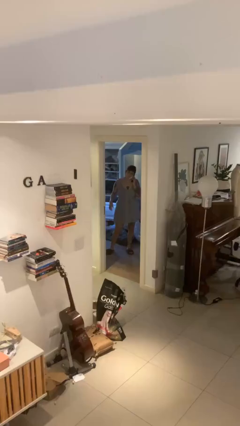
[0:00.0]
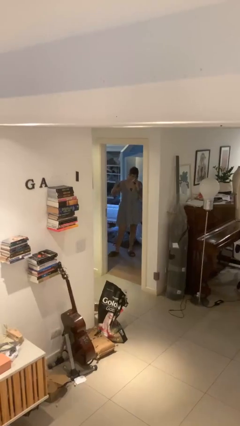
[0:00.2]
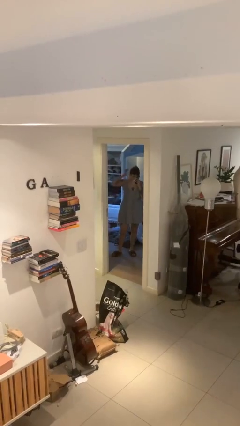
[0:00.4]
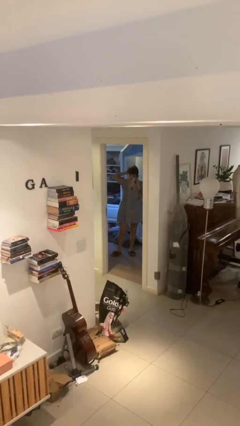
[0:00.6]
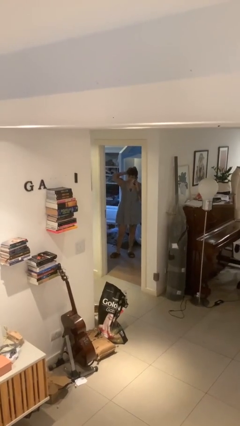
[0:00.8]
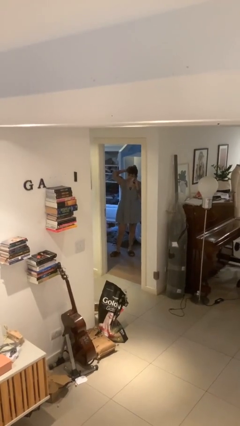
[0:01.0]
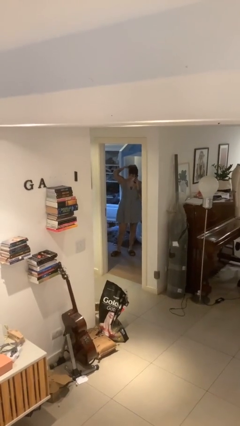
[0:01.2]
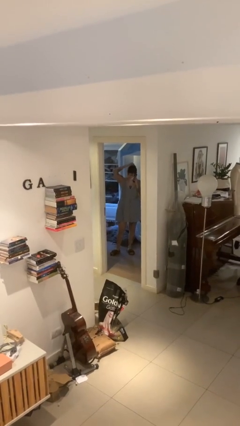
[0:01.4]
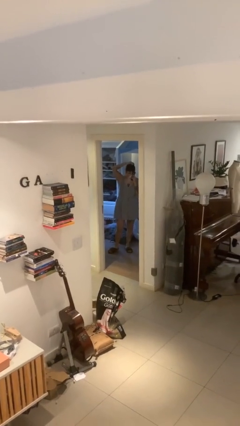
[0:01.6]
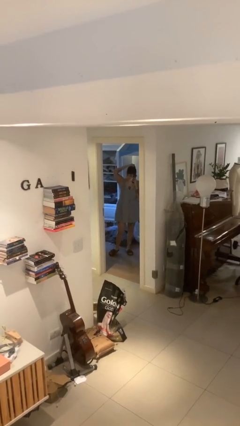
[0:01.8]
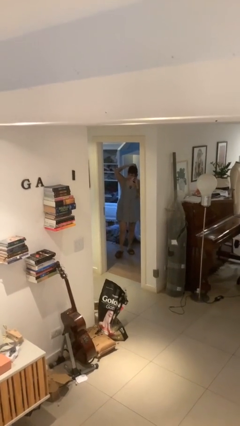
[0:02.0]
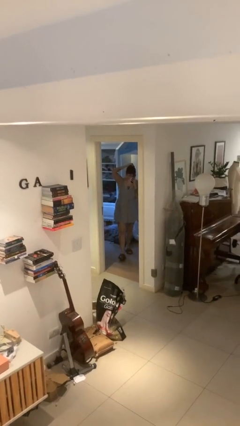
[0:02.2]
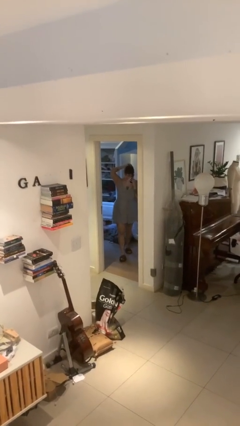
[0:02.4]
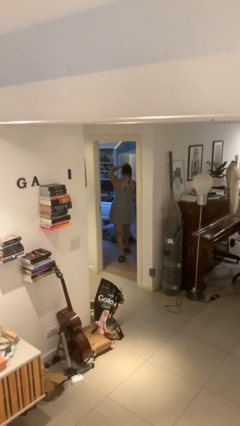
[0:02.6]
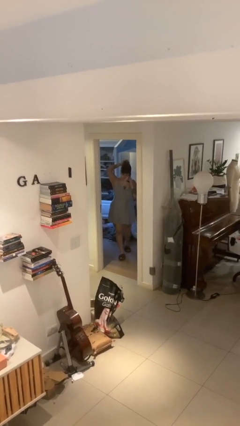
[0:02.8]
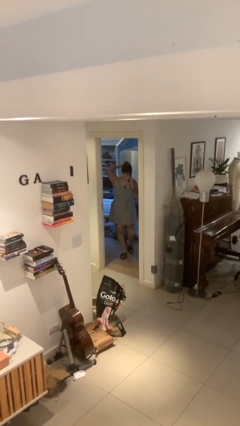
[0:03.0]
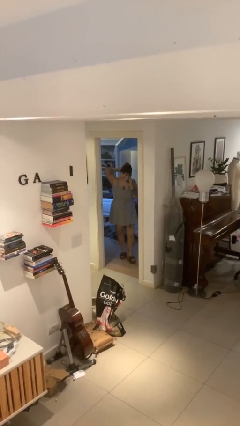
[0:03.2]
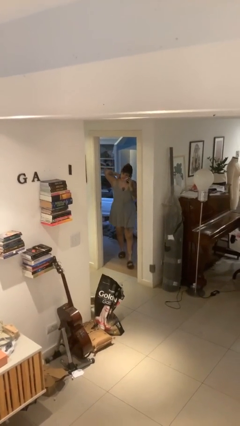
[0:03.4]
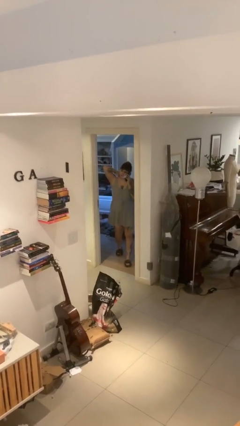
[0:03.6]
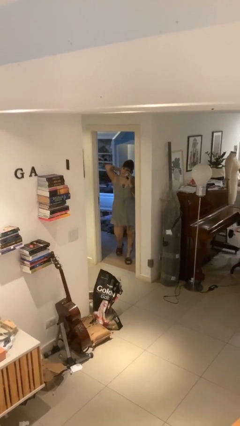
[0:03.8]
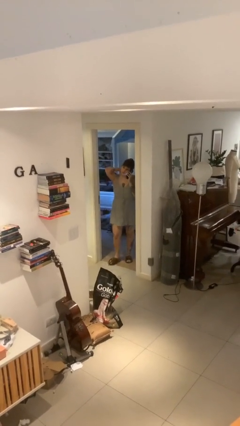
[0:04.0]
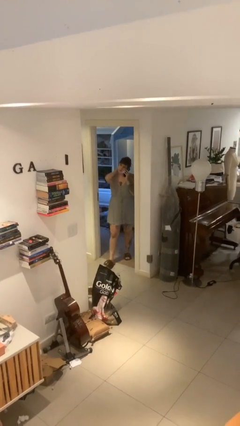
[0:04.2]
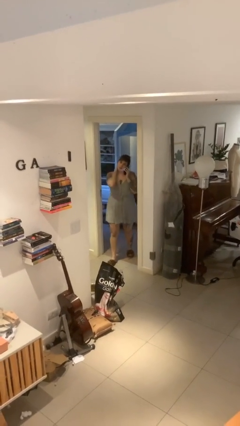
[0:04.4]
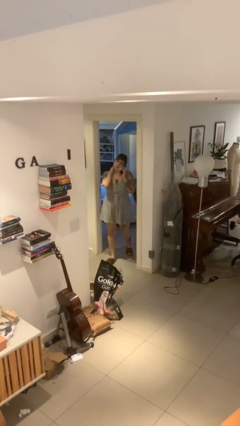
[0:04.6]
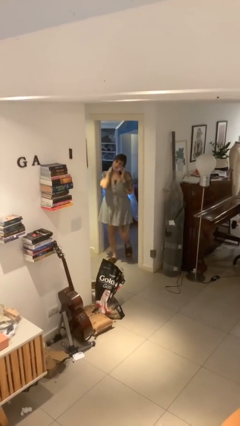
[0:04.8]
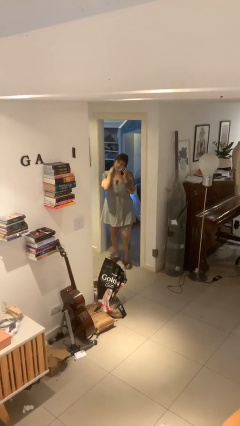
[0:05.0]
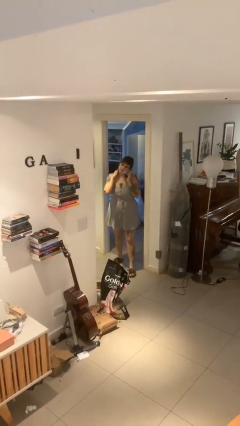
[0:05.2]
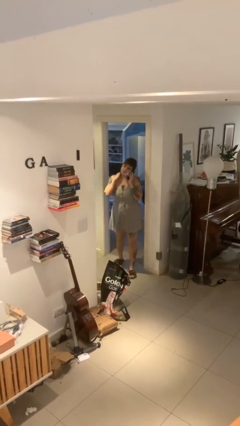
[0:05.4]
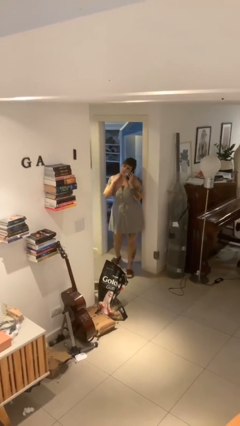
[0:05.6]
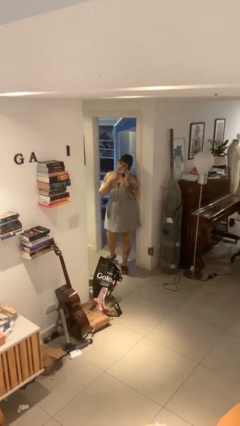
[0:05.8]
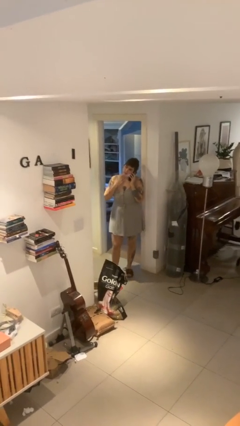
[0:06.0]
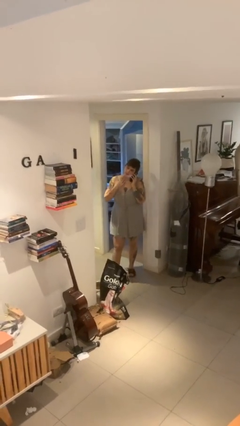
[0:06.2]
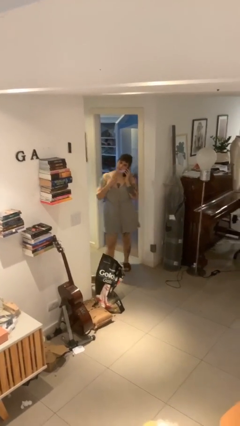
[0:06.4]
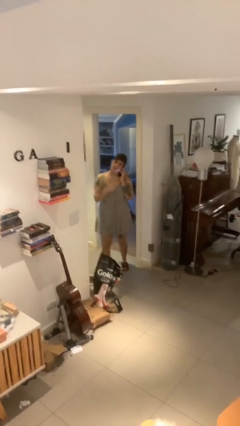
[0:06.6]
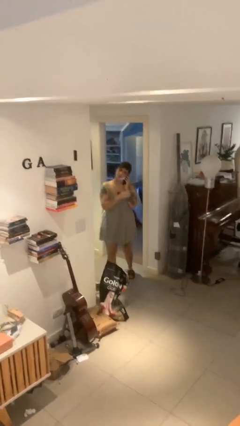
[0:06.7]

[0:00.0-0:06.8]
person enters scene through structure

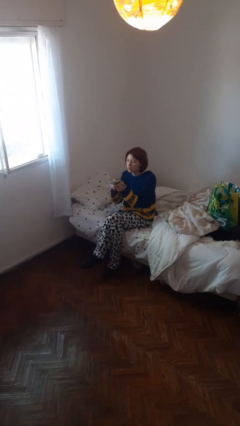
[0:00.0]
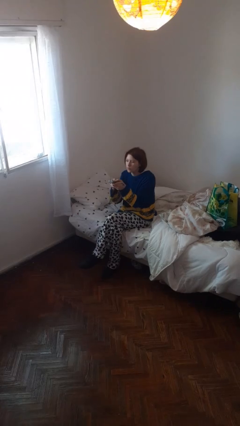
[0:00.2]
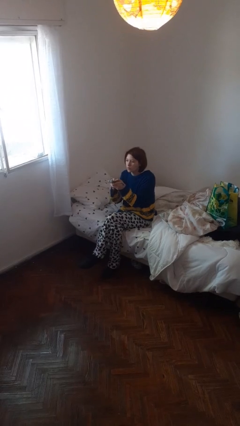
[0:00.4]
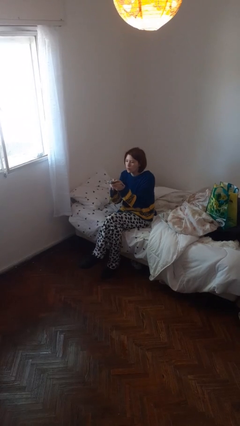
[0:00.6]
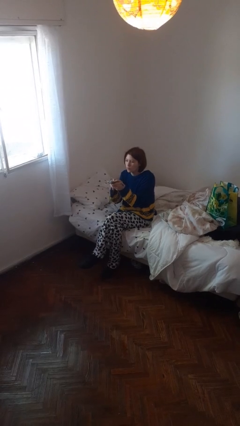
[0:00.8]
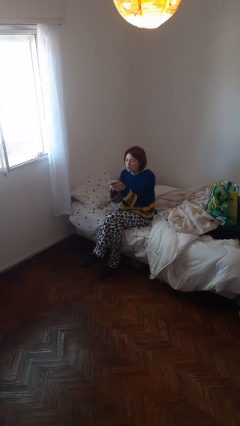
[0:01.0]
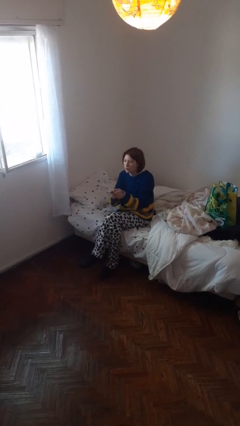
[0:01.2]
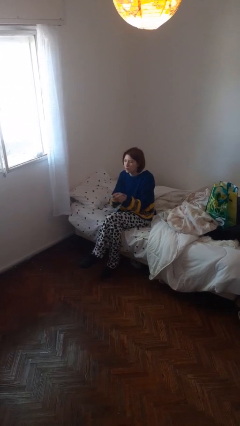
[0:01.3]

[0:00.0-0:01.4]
person uses television remote

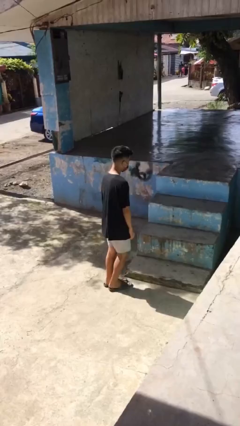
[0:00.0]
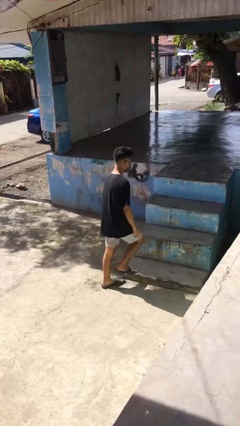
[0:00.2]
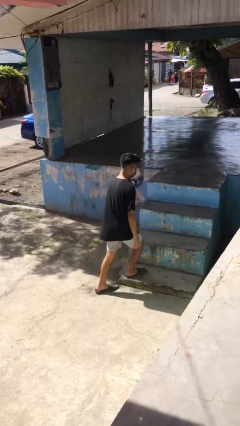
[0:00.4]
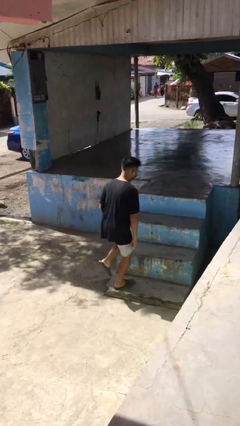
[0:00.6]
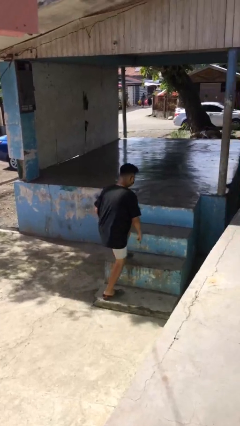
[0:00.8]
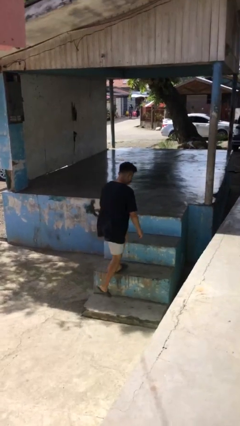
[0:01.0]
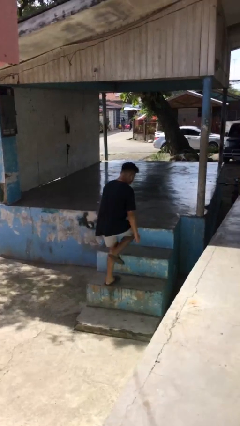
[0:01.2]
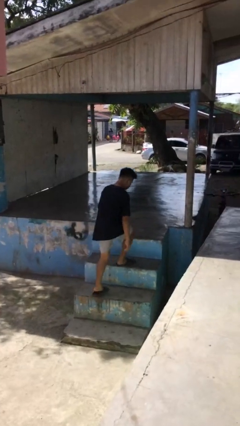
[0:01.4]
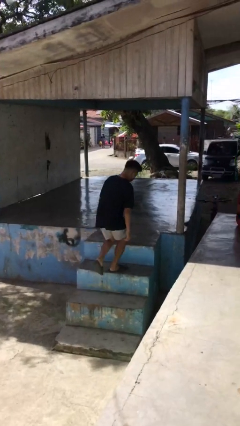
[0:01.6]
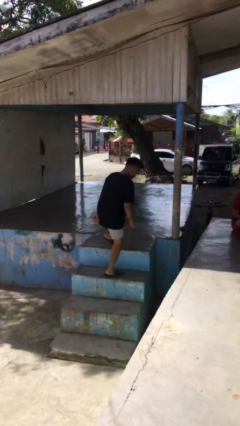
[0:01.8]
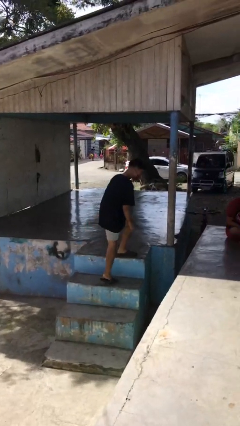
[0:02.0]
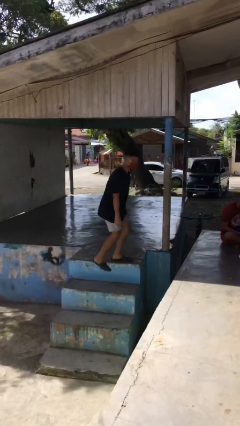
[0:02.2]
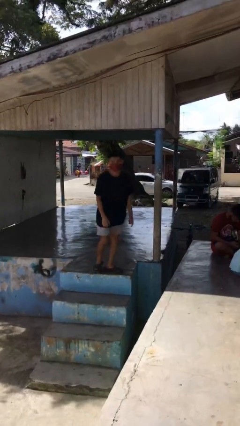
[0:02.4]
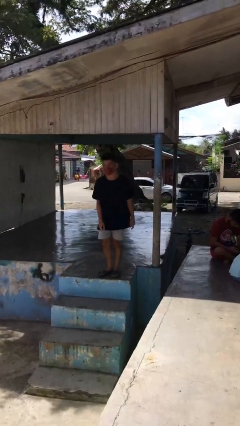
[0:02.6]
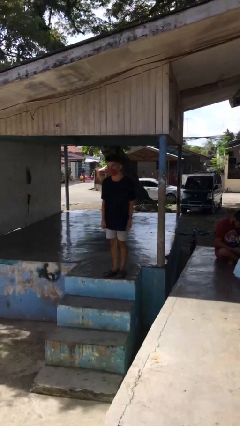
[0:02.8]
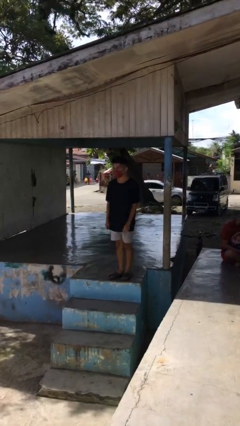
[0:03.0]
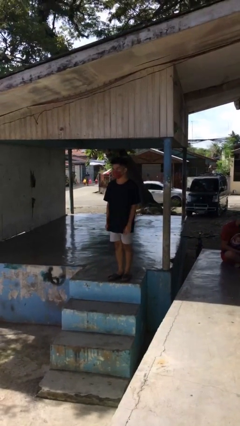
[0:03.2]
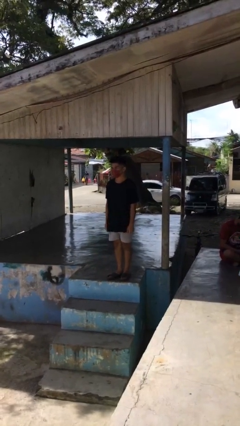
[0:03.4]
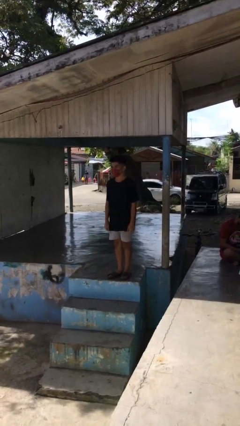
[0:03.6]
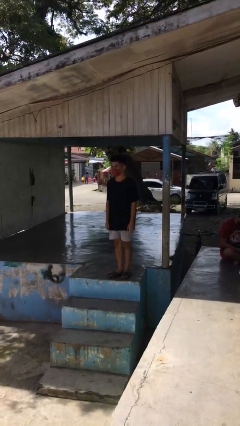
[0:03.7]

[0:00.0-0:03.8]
person climbs up stairs

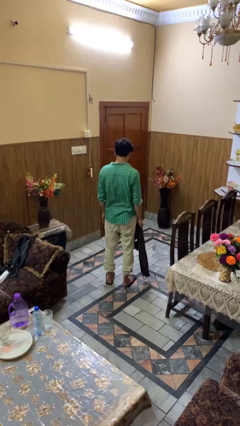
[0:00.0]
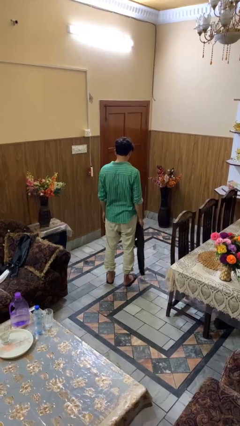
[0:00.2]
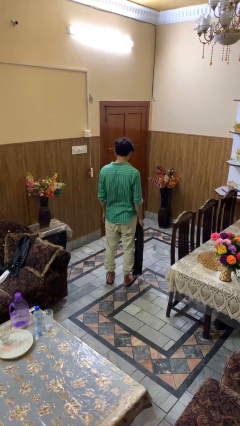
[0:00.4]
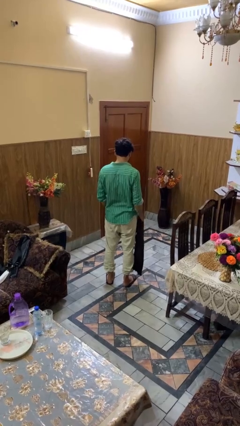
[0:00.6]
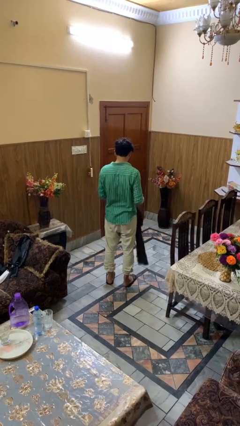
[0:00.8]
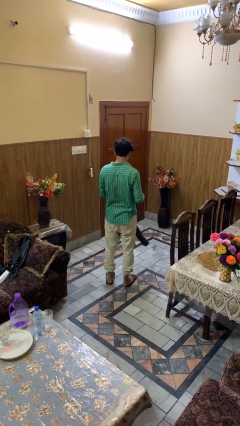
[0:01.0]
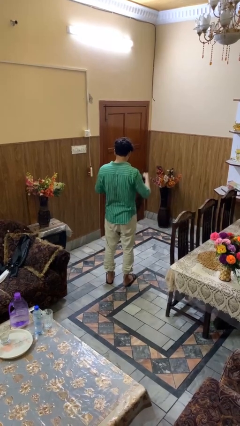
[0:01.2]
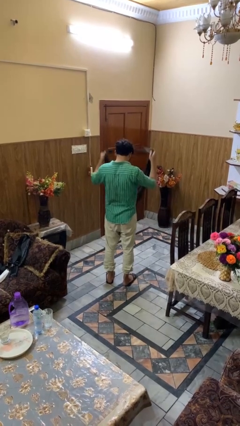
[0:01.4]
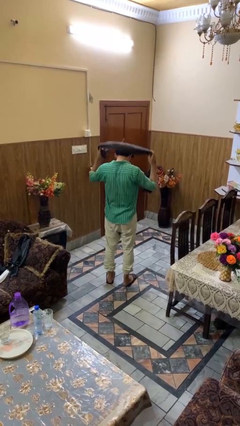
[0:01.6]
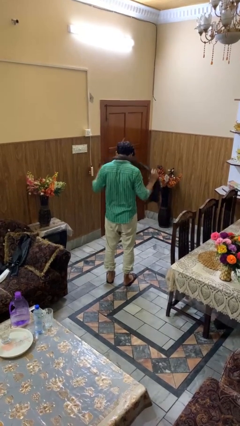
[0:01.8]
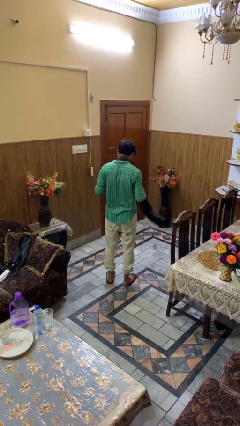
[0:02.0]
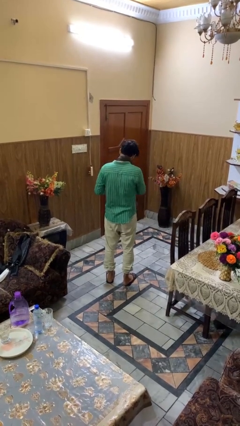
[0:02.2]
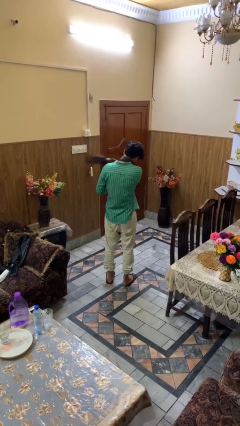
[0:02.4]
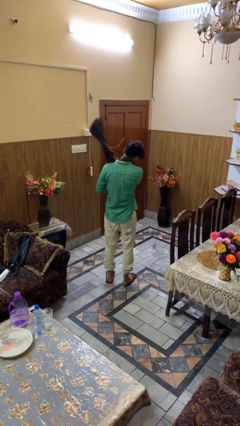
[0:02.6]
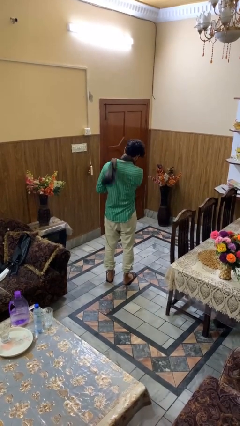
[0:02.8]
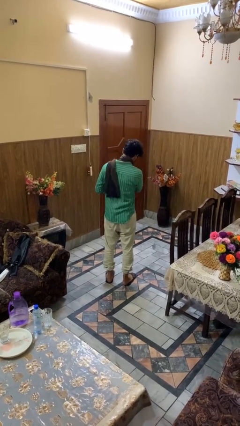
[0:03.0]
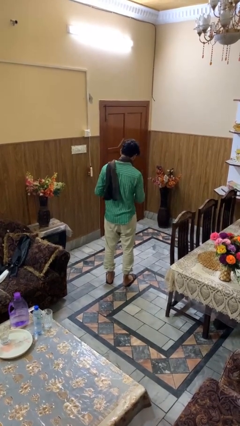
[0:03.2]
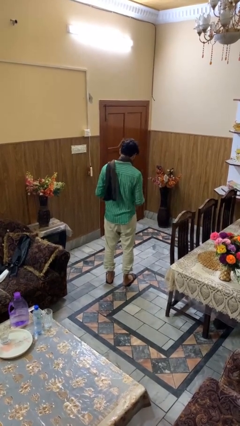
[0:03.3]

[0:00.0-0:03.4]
person puts on scarf

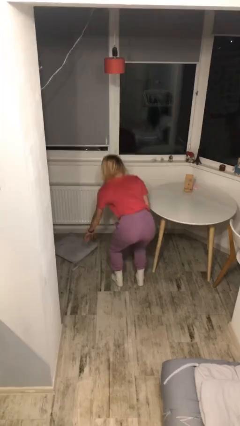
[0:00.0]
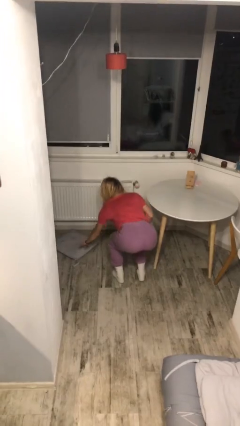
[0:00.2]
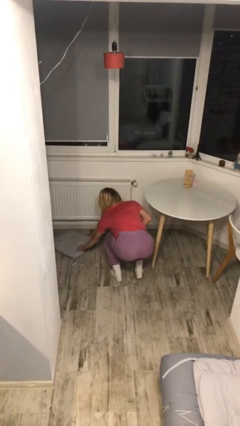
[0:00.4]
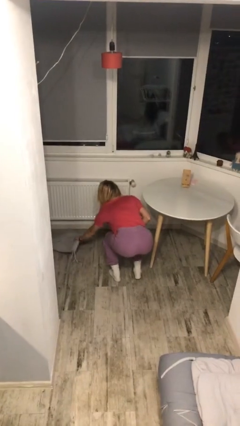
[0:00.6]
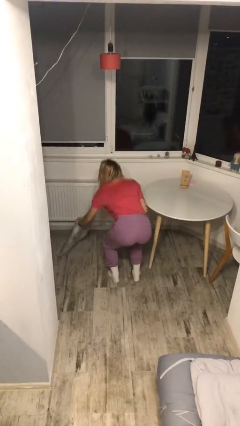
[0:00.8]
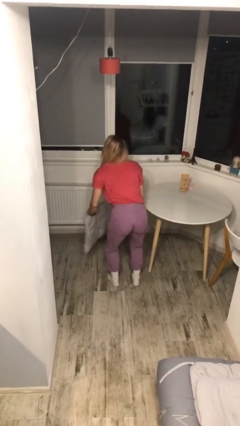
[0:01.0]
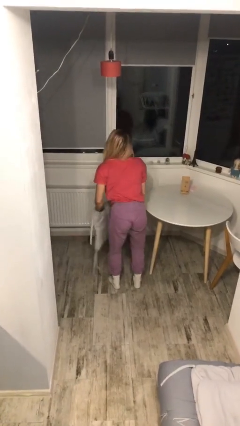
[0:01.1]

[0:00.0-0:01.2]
person picks up object from floor

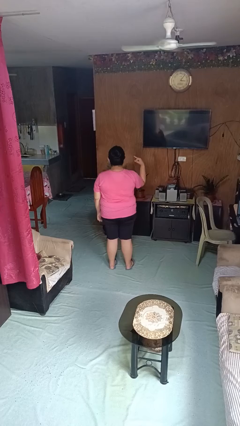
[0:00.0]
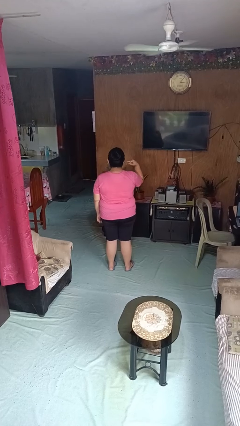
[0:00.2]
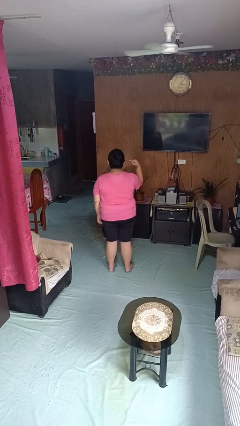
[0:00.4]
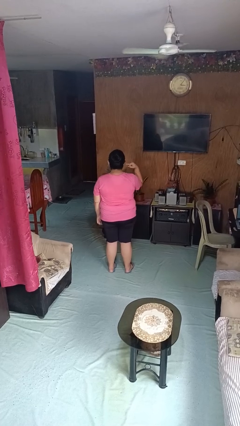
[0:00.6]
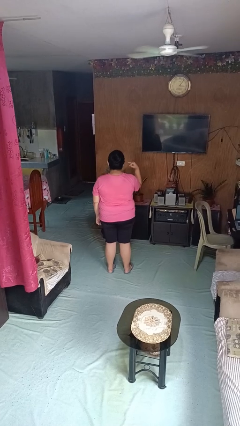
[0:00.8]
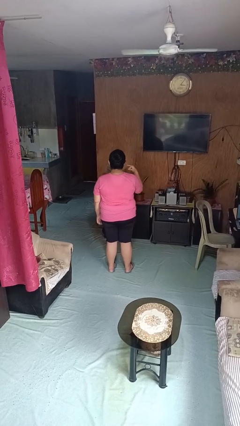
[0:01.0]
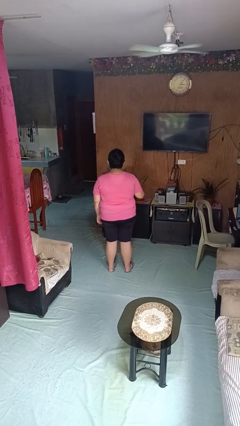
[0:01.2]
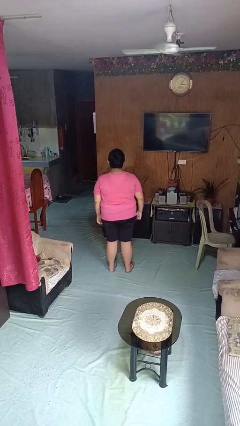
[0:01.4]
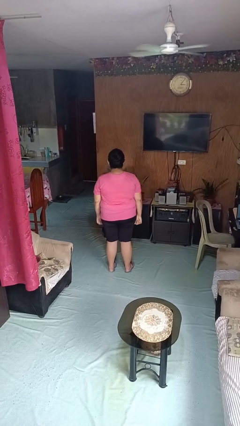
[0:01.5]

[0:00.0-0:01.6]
person gestures listen closely
